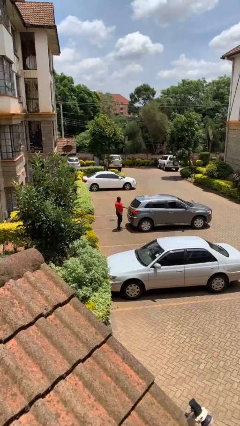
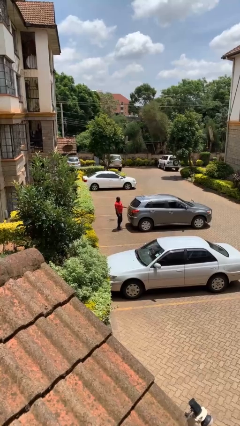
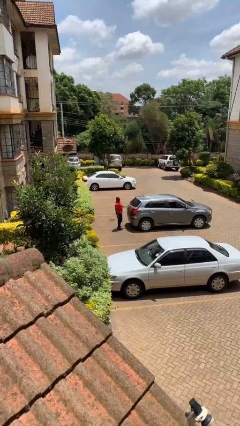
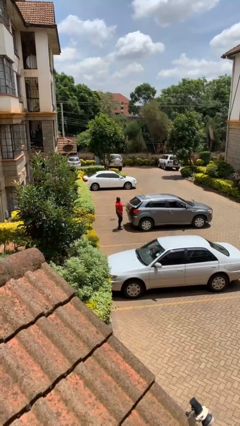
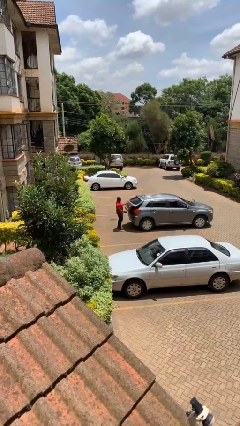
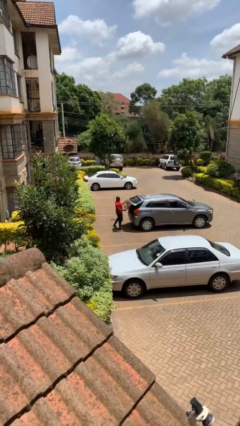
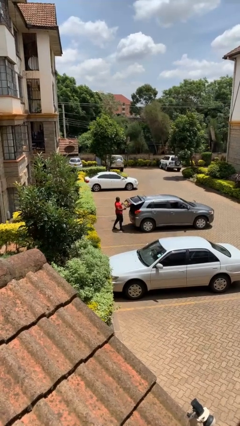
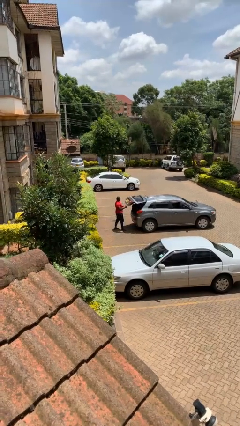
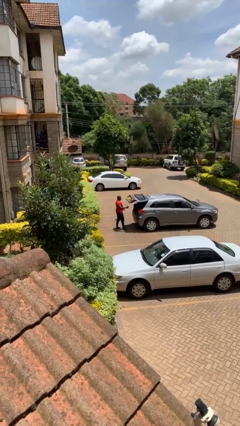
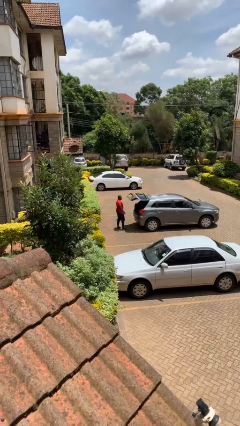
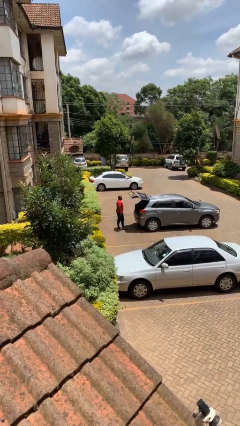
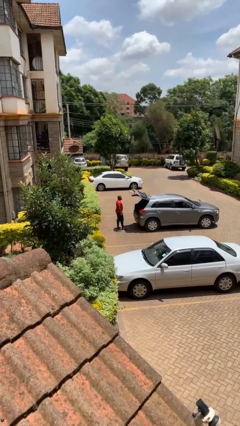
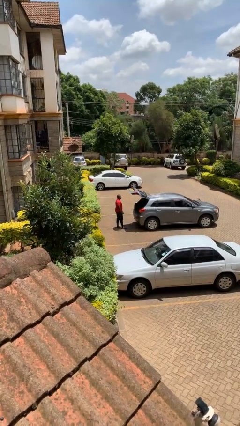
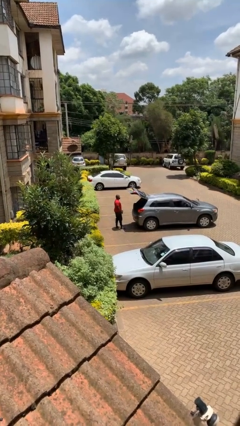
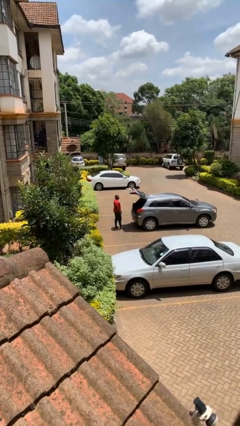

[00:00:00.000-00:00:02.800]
person opens car trunk

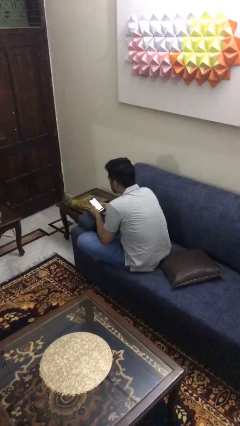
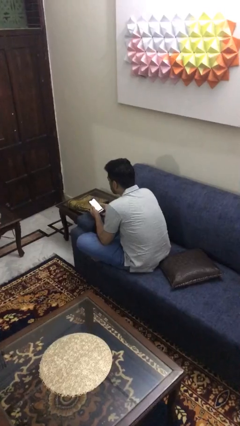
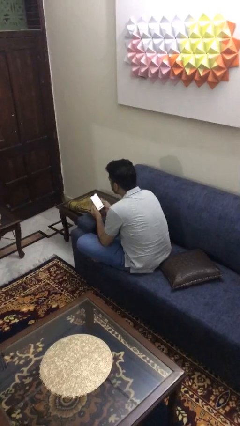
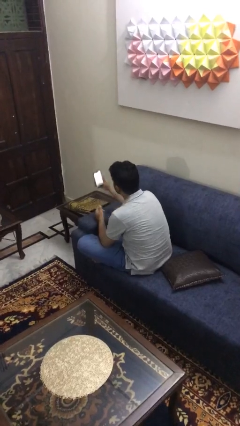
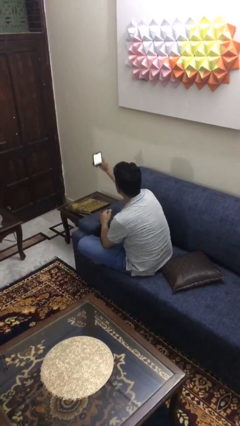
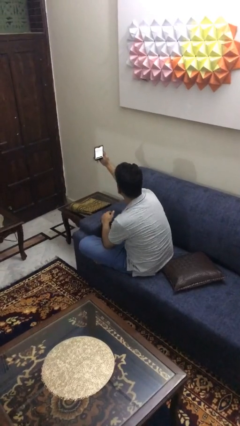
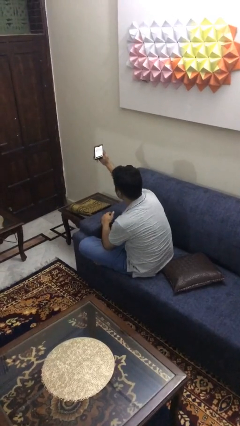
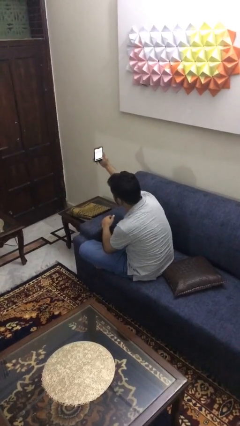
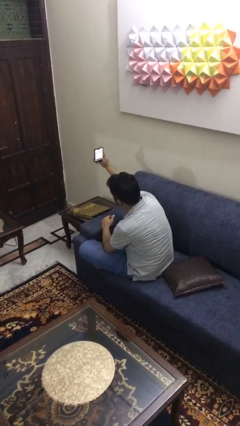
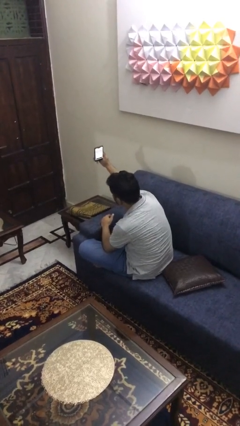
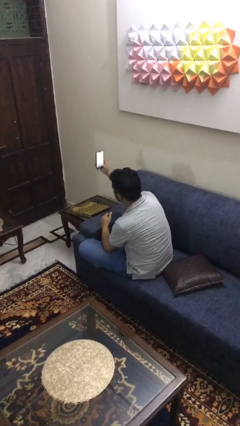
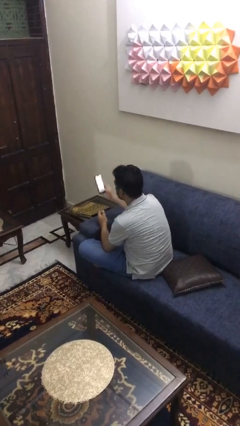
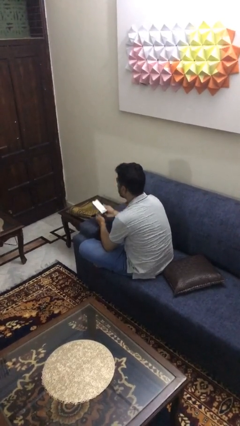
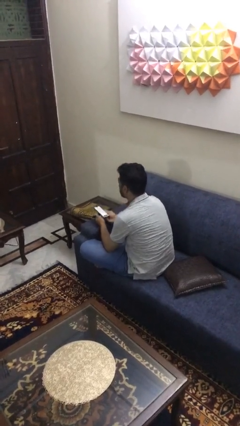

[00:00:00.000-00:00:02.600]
person takes selfie

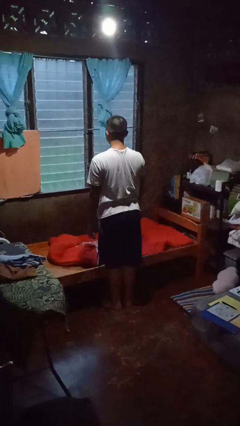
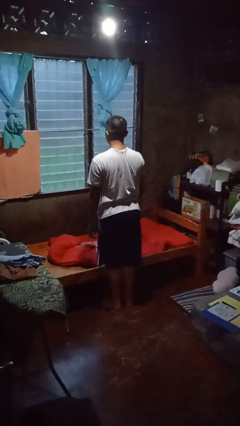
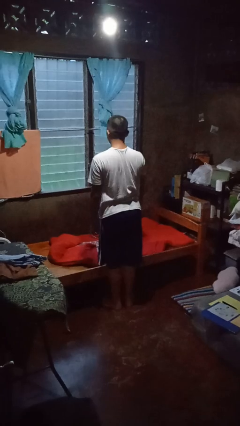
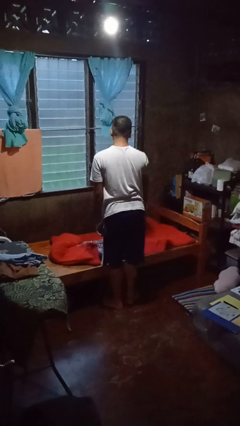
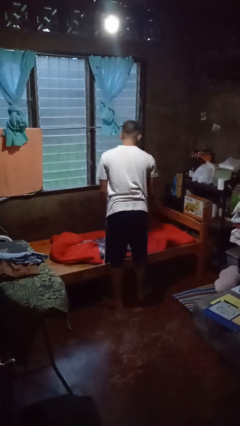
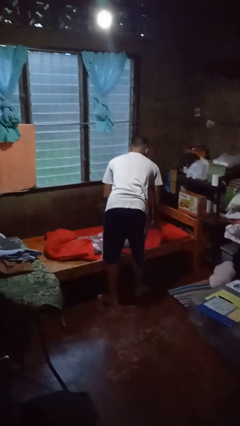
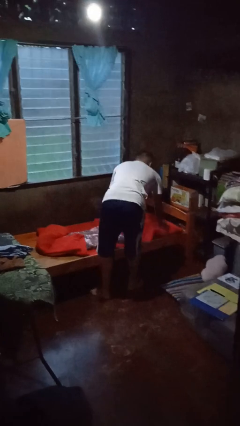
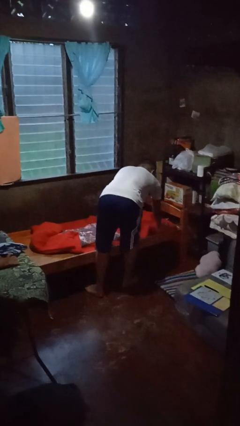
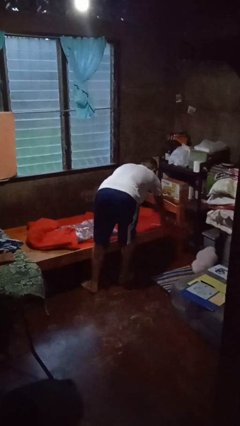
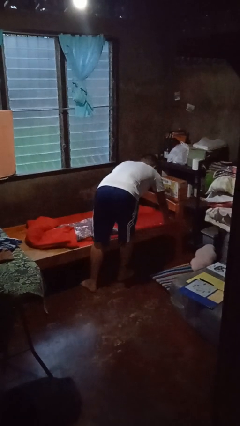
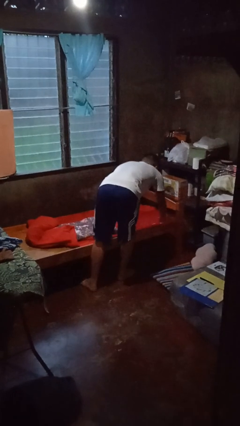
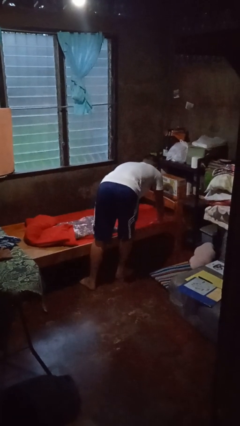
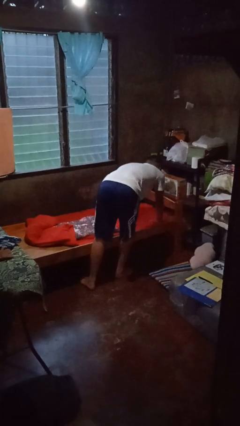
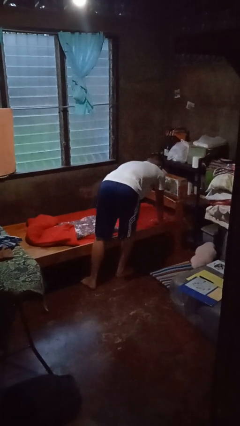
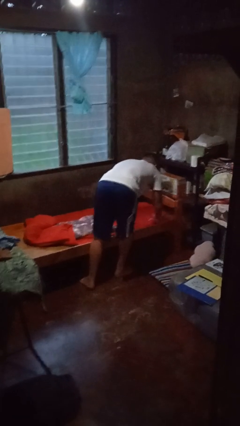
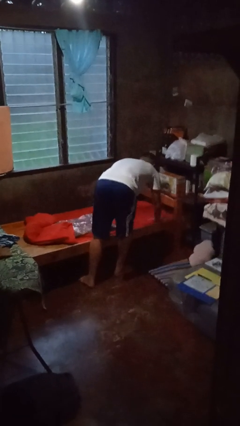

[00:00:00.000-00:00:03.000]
person makes bed

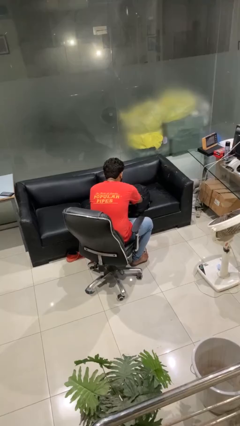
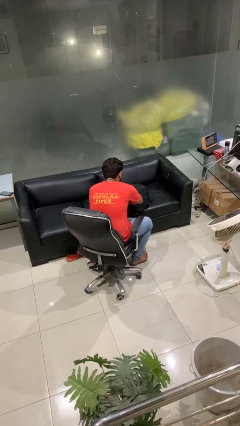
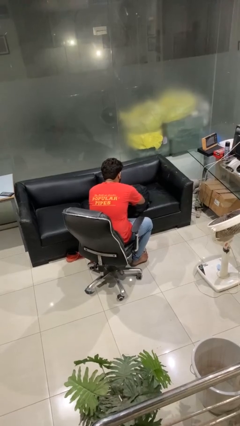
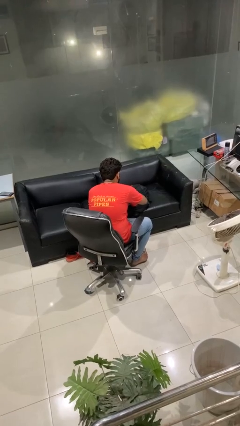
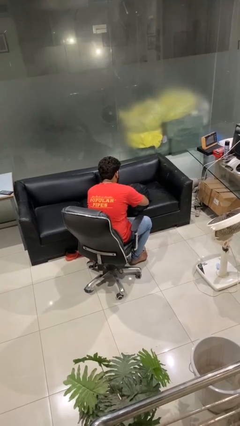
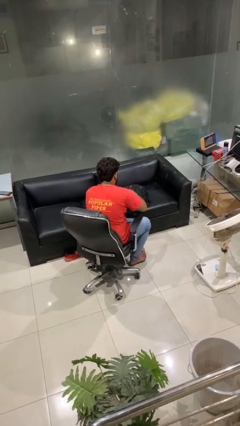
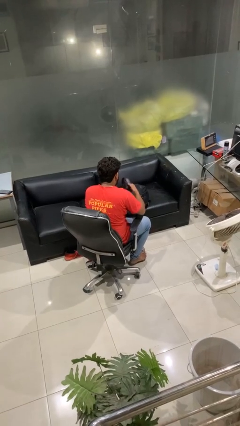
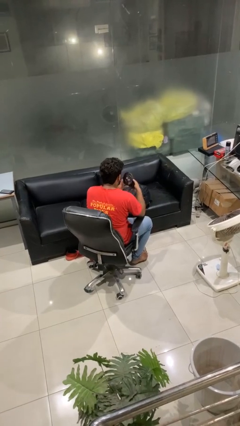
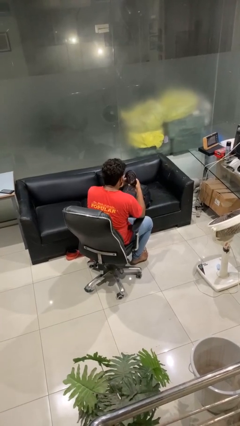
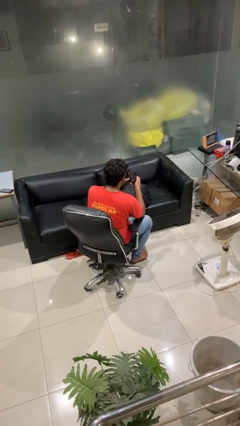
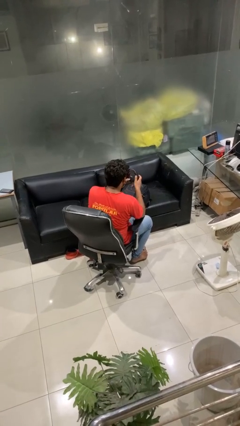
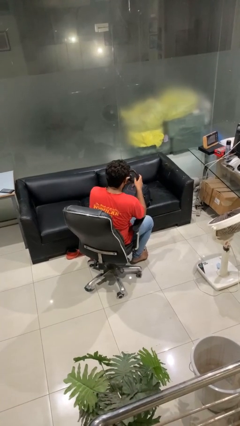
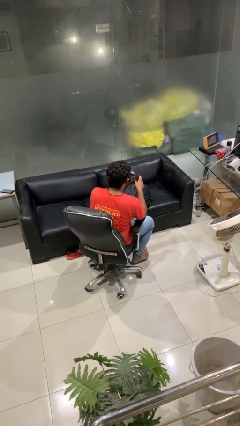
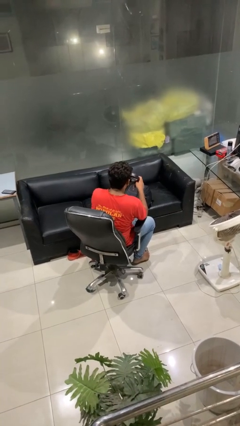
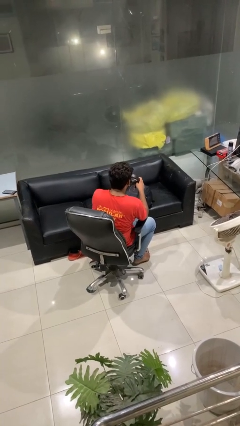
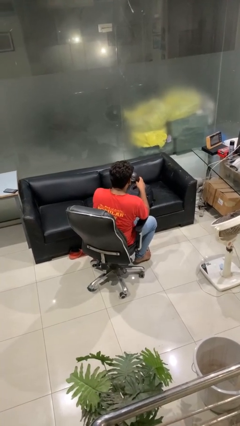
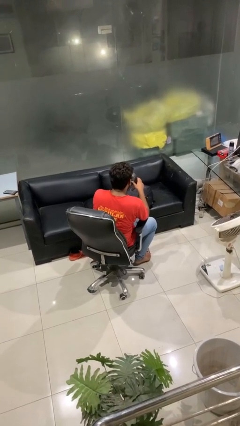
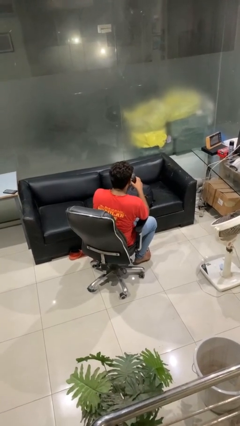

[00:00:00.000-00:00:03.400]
person takes object from backpack

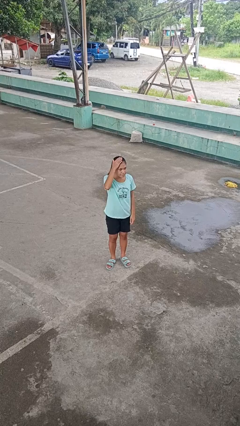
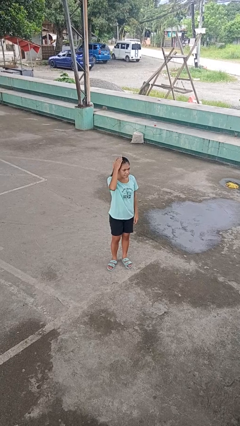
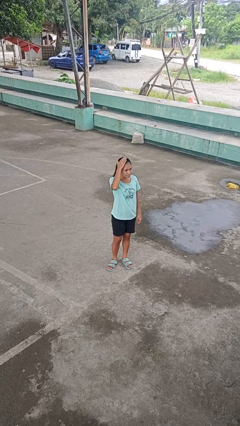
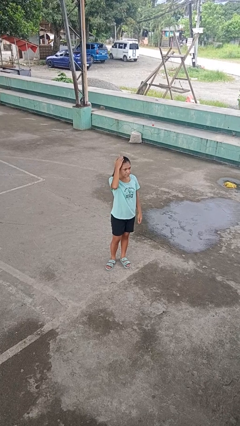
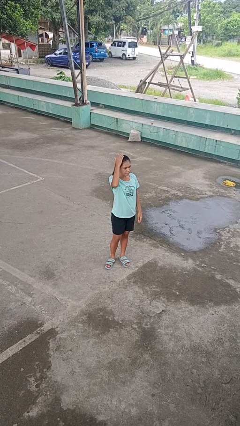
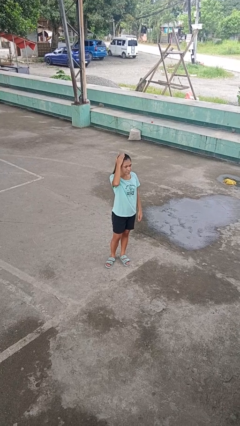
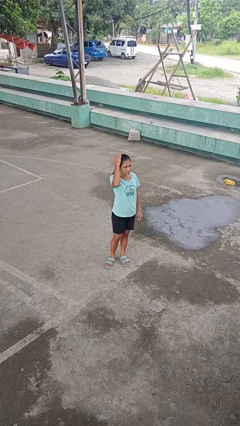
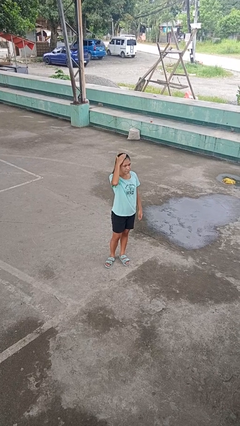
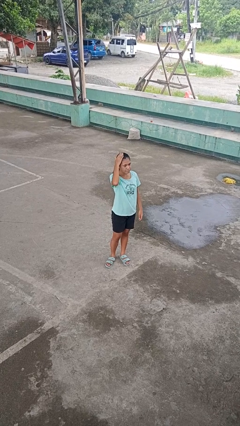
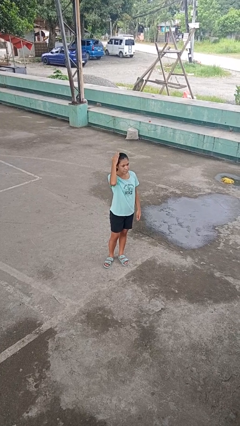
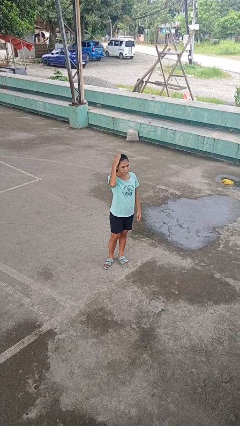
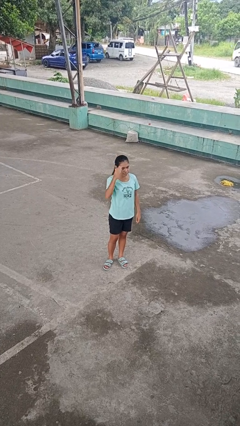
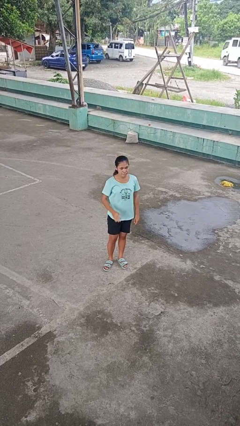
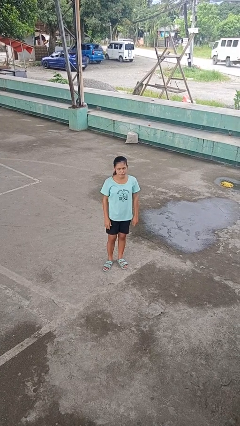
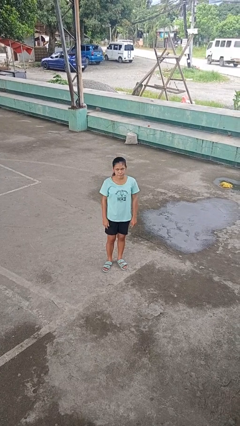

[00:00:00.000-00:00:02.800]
person pats head

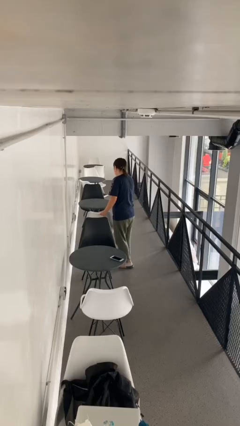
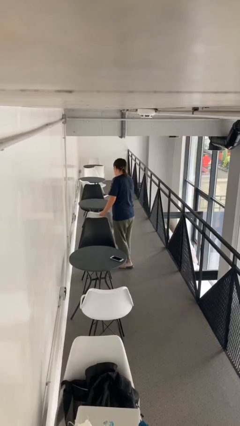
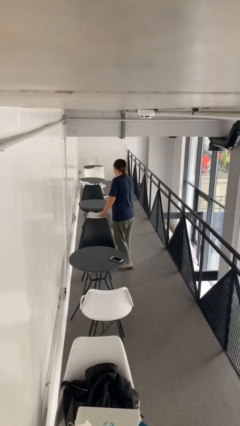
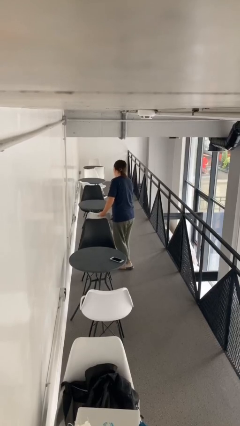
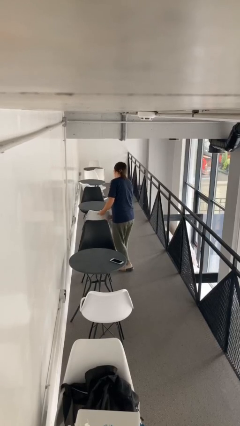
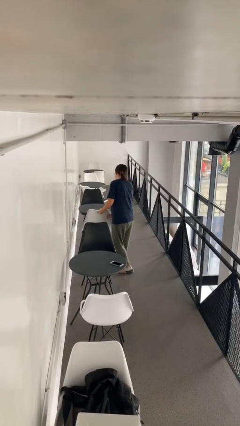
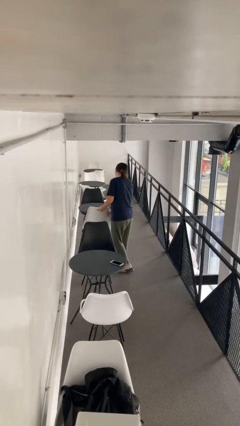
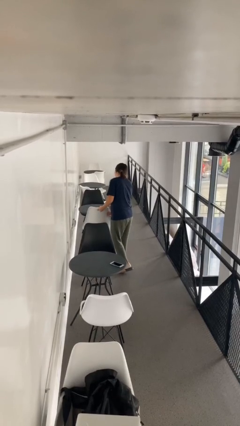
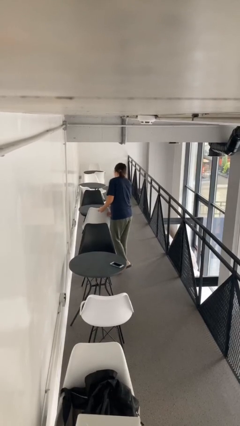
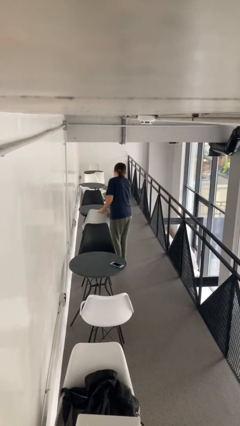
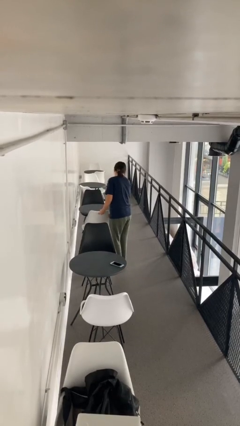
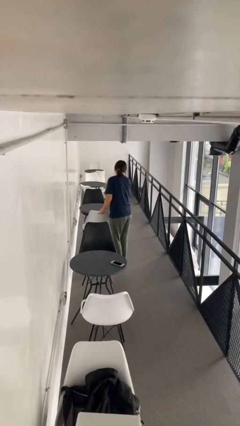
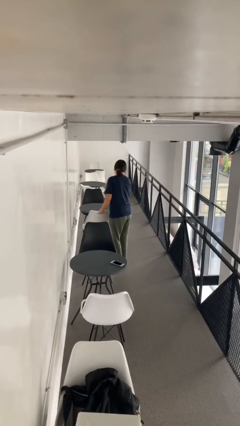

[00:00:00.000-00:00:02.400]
person pushes in chair
